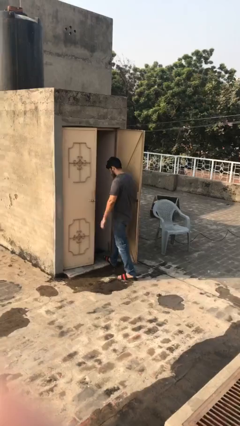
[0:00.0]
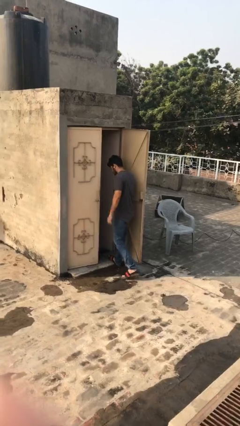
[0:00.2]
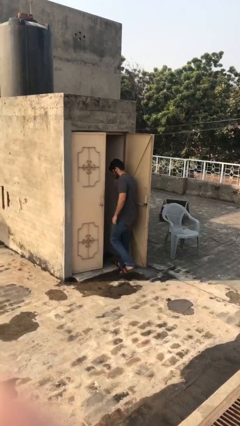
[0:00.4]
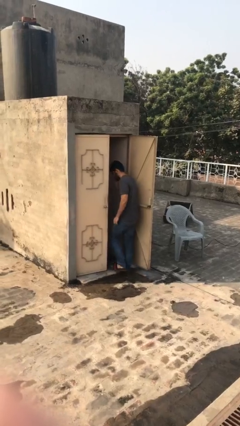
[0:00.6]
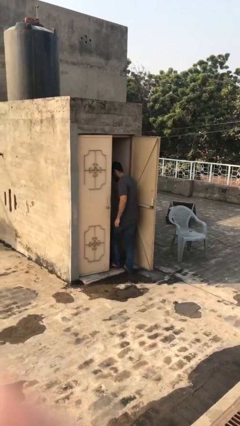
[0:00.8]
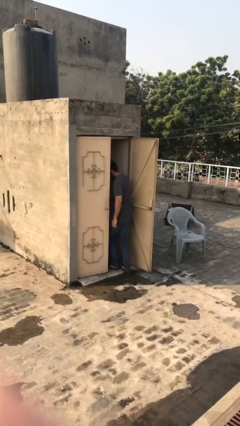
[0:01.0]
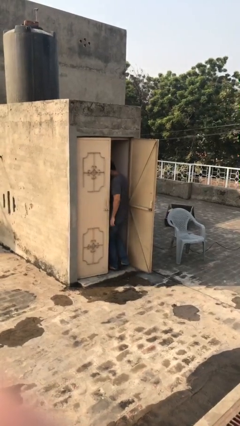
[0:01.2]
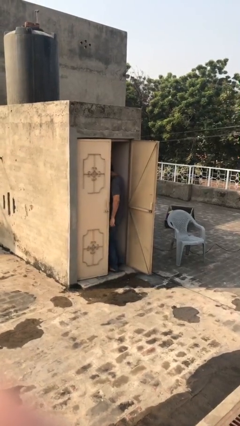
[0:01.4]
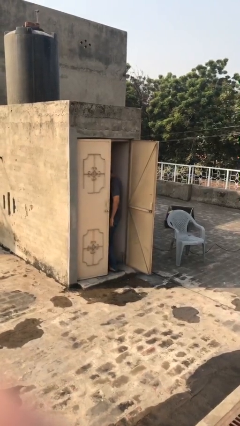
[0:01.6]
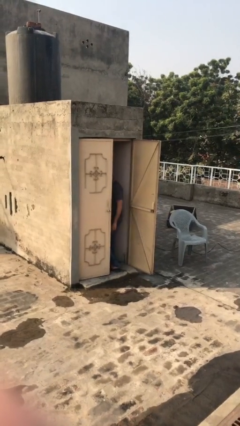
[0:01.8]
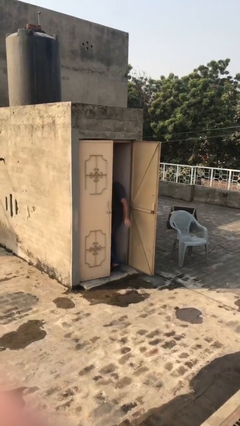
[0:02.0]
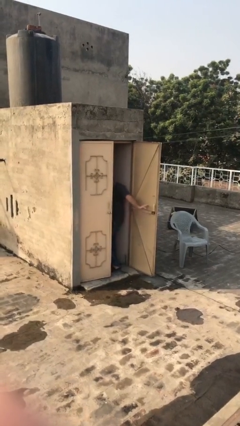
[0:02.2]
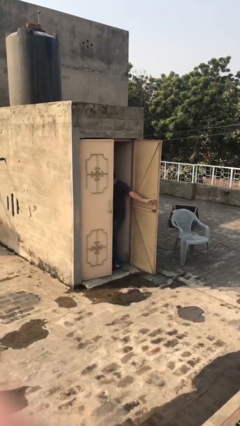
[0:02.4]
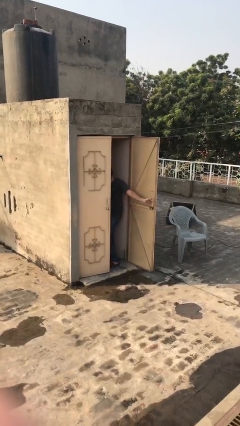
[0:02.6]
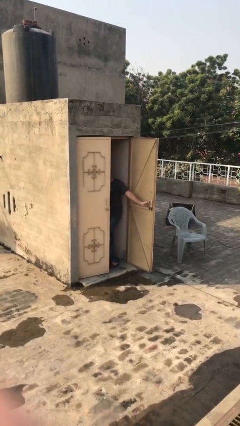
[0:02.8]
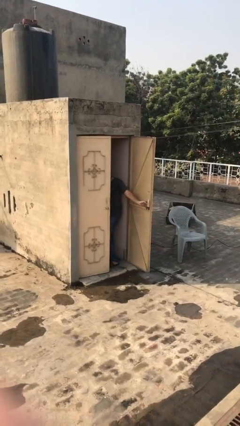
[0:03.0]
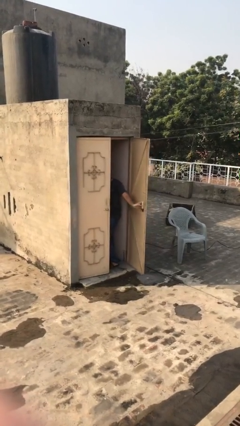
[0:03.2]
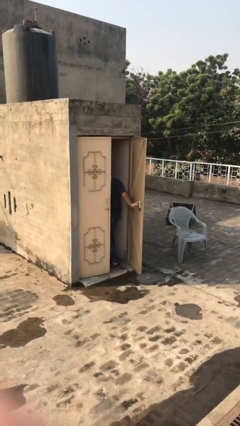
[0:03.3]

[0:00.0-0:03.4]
person exits scene through structure

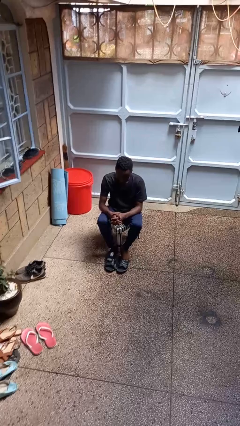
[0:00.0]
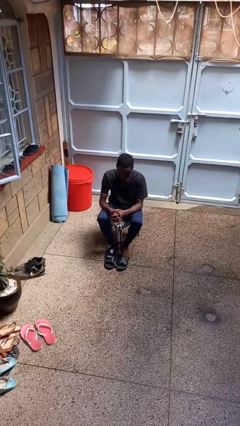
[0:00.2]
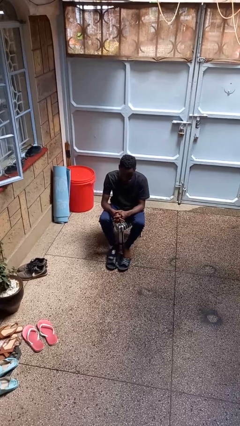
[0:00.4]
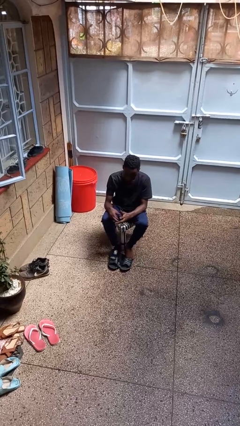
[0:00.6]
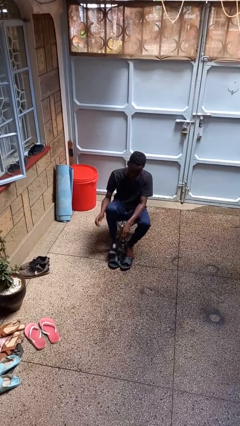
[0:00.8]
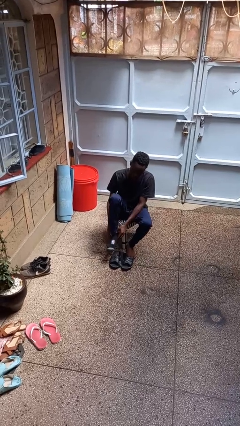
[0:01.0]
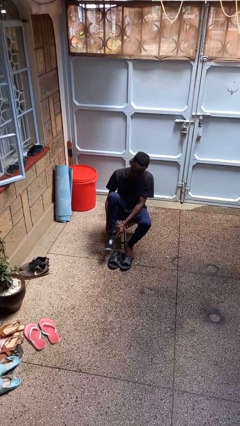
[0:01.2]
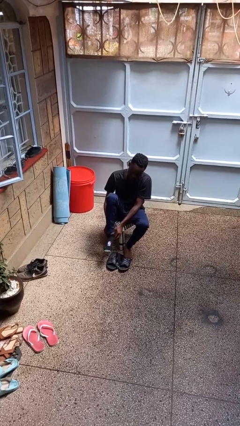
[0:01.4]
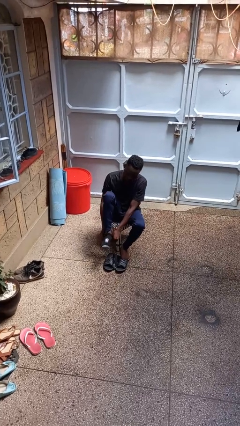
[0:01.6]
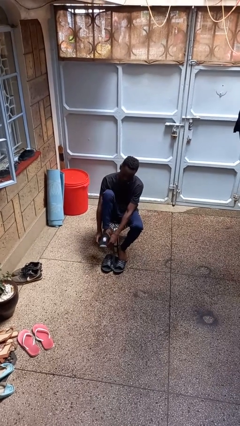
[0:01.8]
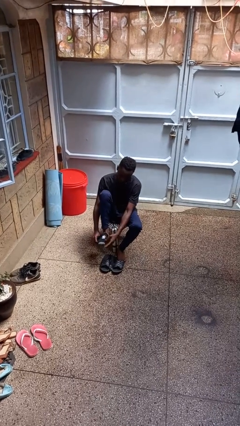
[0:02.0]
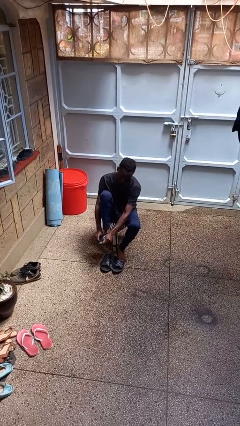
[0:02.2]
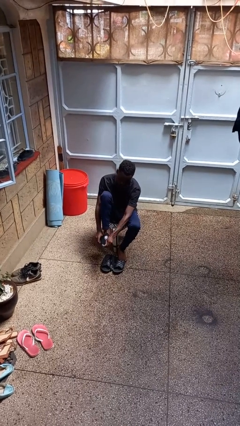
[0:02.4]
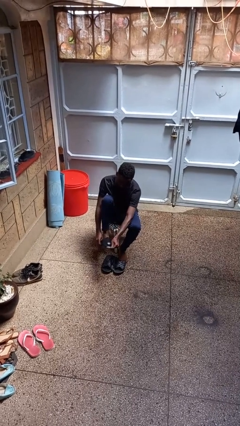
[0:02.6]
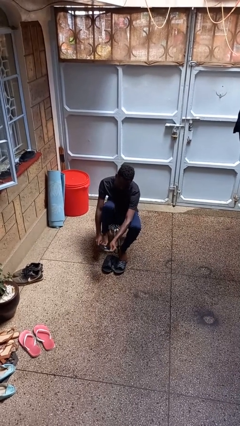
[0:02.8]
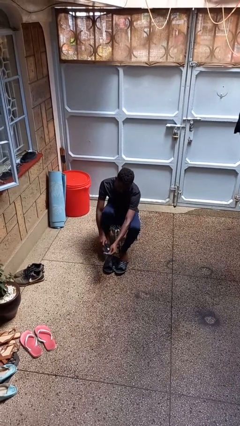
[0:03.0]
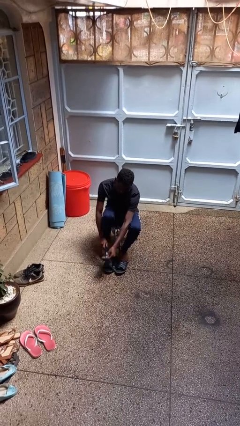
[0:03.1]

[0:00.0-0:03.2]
person takes off socks

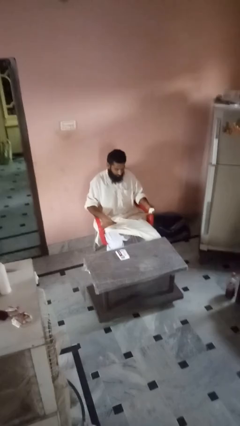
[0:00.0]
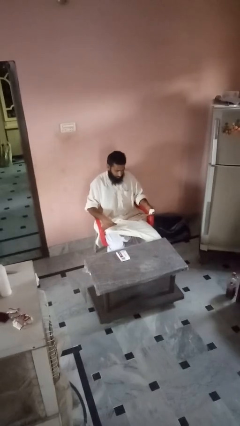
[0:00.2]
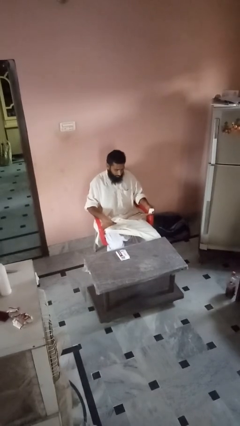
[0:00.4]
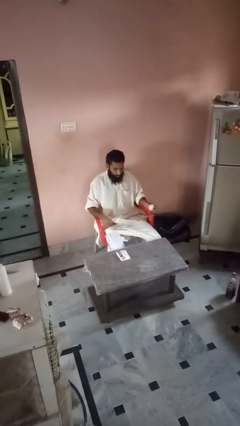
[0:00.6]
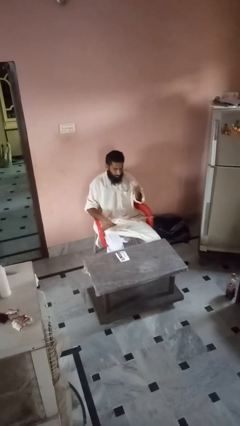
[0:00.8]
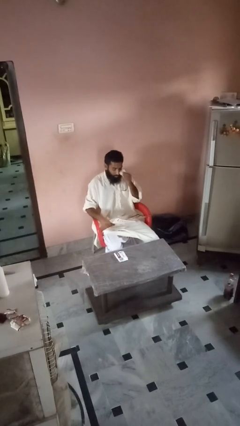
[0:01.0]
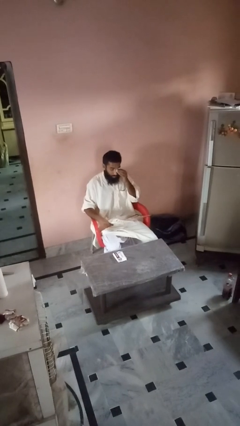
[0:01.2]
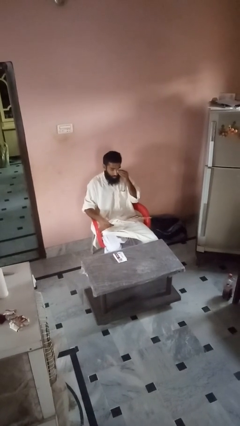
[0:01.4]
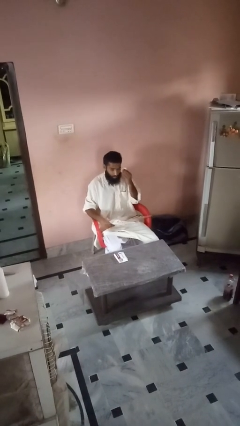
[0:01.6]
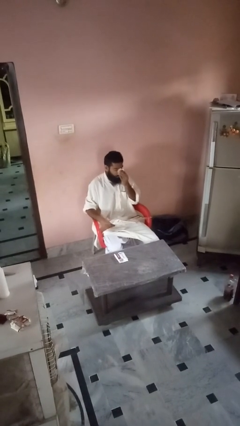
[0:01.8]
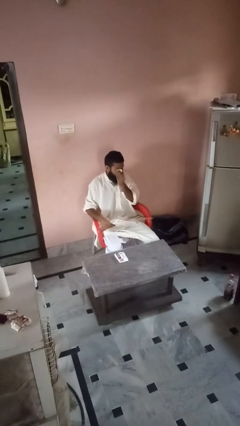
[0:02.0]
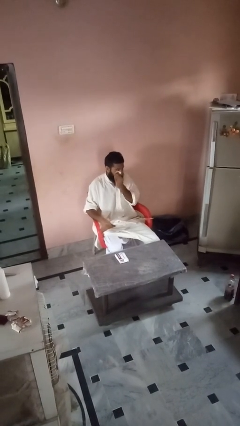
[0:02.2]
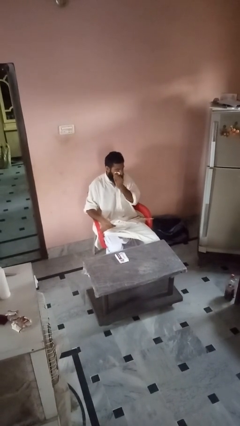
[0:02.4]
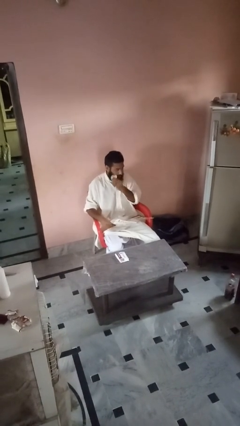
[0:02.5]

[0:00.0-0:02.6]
person tears paper

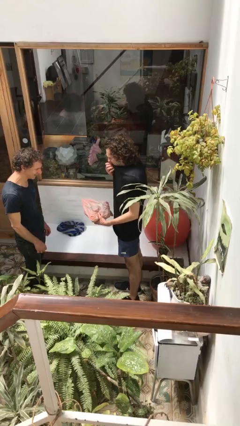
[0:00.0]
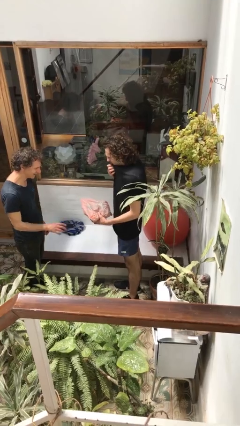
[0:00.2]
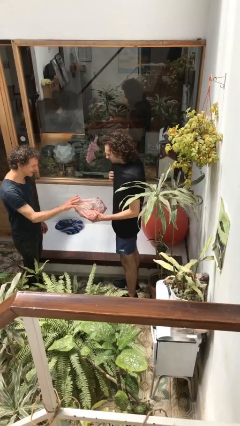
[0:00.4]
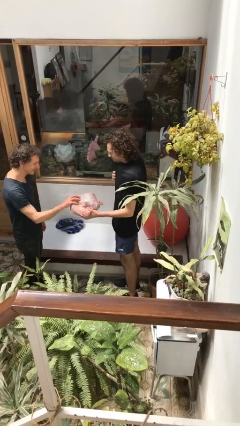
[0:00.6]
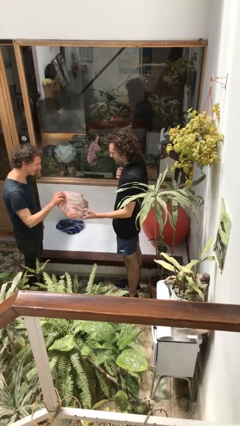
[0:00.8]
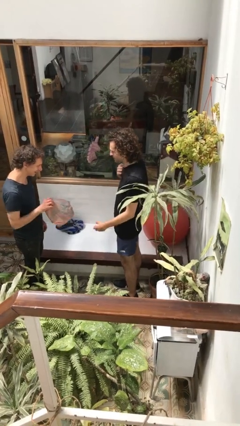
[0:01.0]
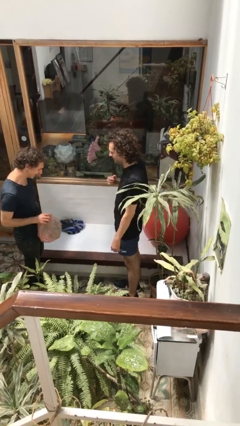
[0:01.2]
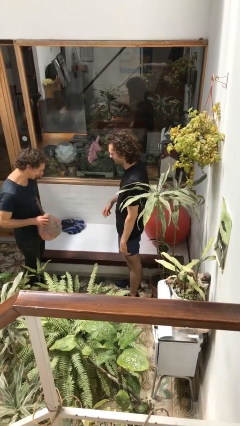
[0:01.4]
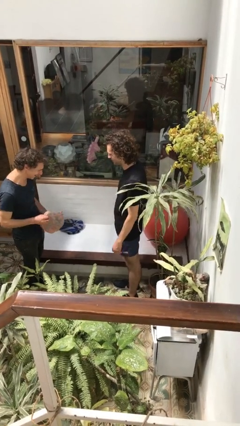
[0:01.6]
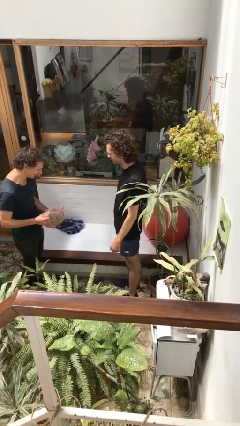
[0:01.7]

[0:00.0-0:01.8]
person transfers object to person

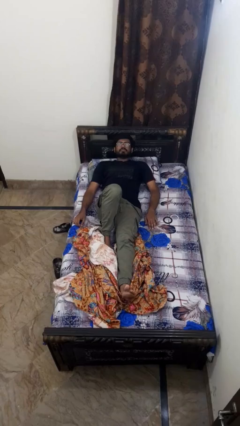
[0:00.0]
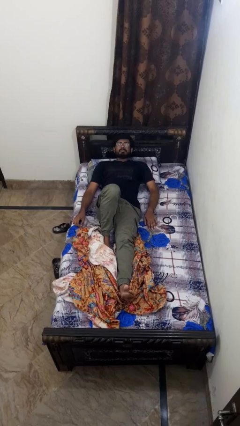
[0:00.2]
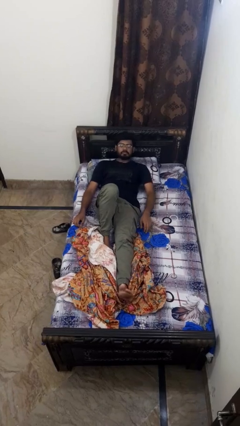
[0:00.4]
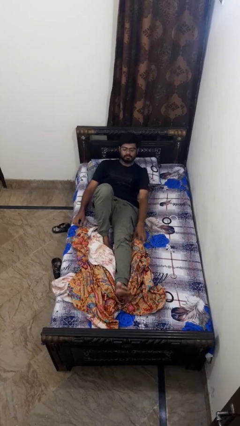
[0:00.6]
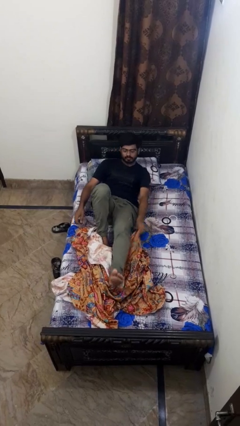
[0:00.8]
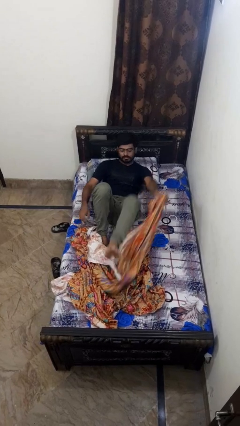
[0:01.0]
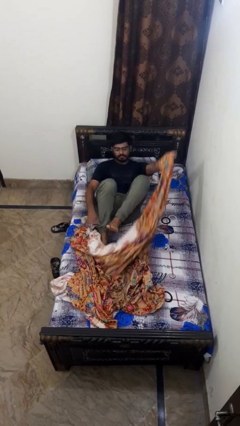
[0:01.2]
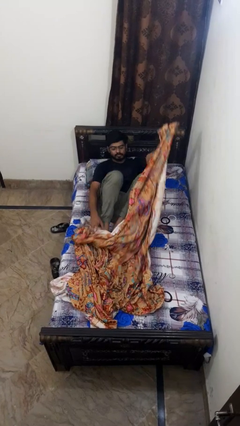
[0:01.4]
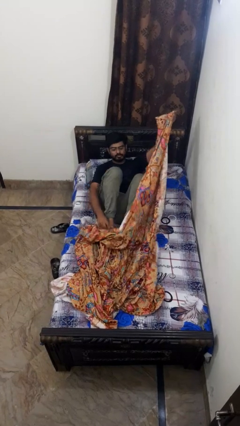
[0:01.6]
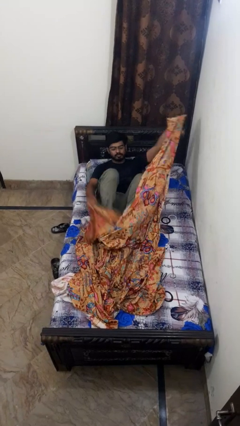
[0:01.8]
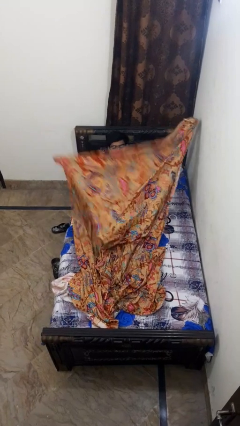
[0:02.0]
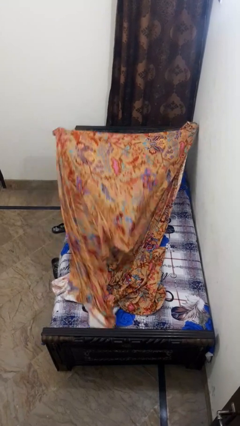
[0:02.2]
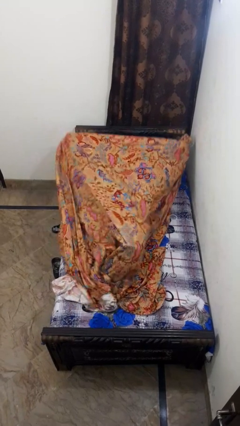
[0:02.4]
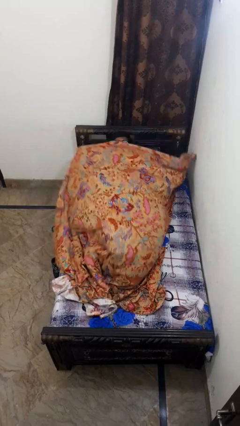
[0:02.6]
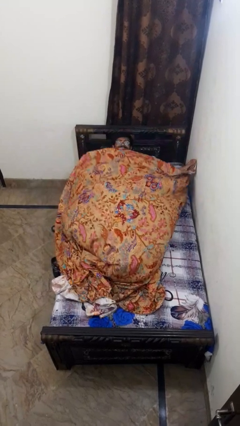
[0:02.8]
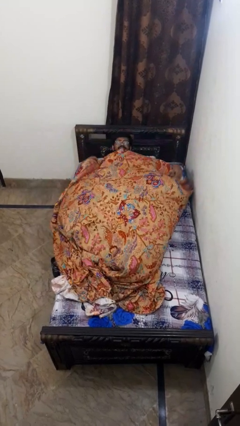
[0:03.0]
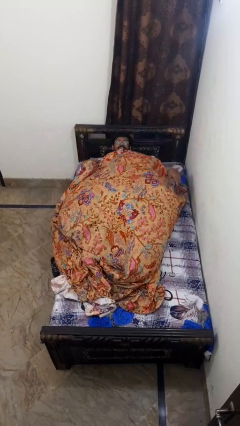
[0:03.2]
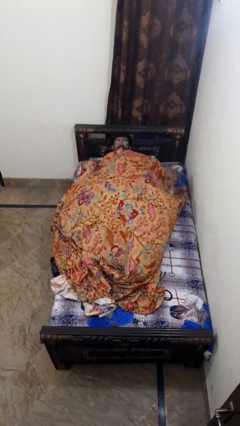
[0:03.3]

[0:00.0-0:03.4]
person covers with bedsheets

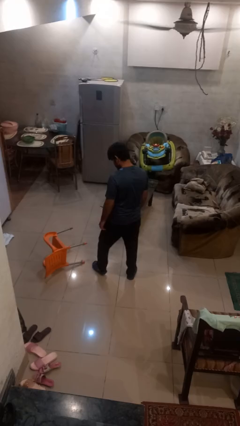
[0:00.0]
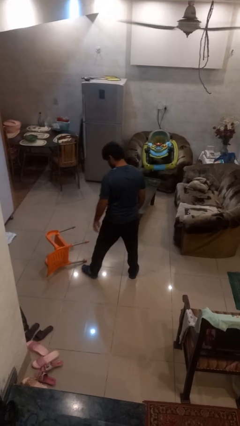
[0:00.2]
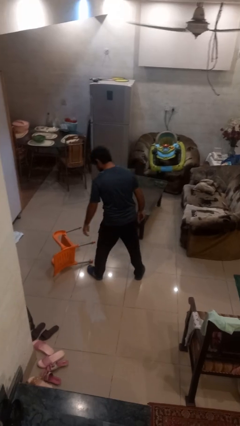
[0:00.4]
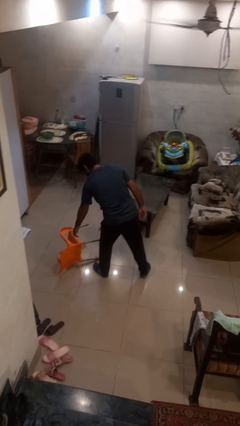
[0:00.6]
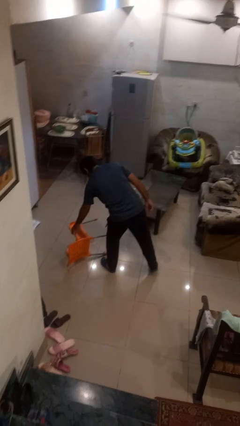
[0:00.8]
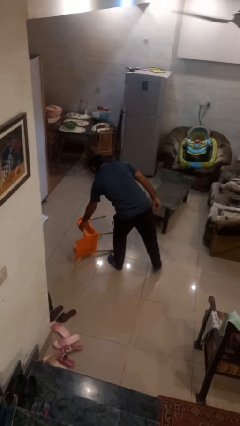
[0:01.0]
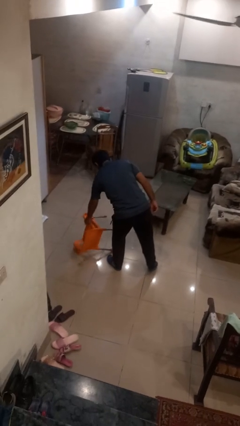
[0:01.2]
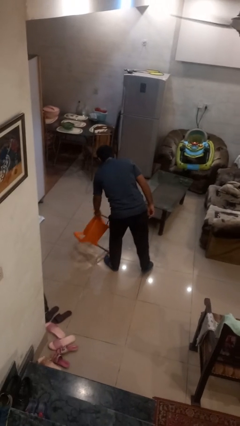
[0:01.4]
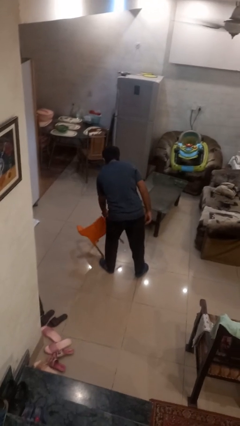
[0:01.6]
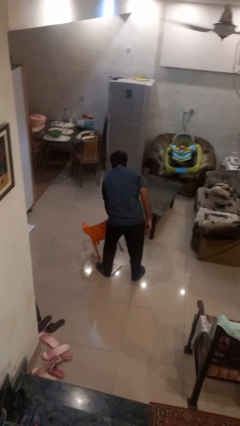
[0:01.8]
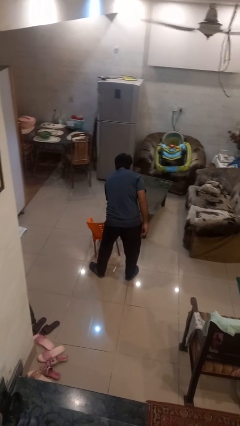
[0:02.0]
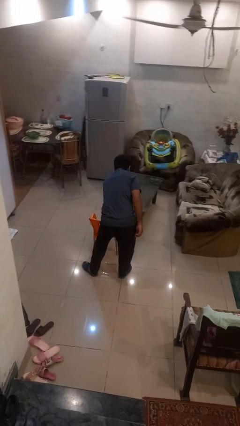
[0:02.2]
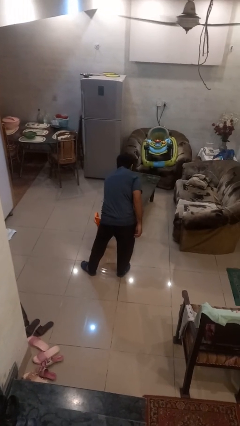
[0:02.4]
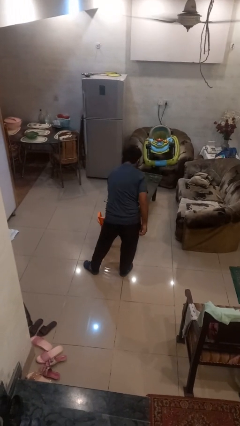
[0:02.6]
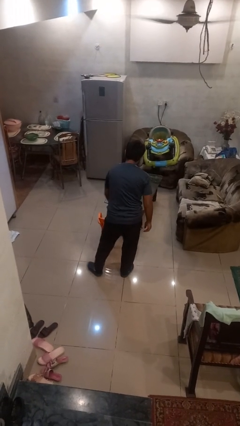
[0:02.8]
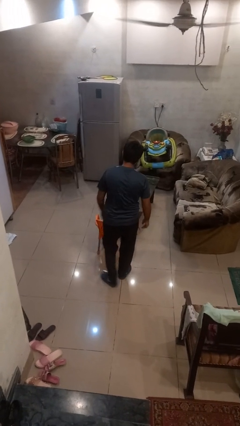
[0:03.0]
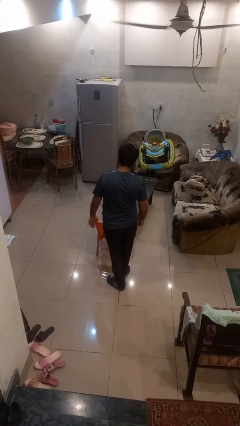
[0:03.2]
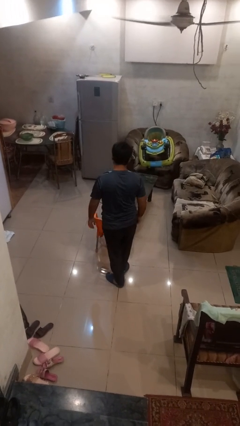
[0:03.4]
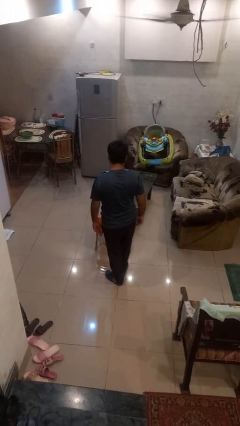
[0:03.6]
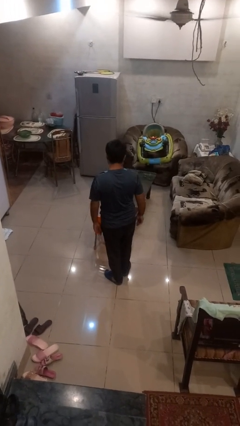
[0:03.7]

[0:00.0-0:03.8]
person sets upright furniture
